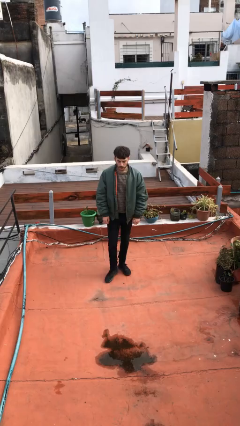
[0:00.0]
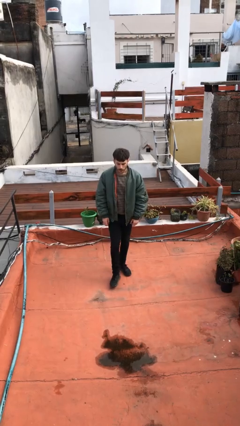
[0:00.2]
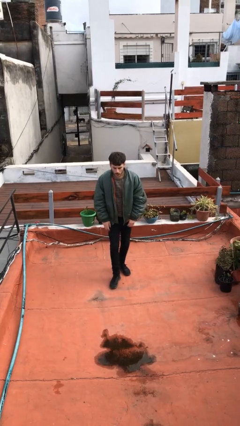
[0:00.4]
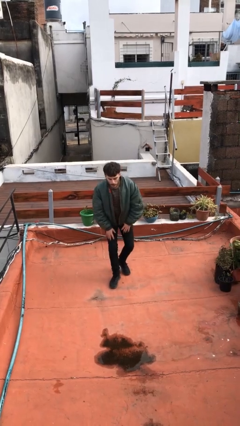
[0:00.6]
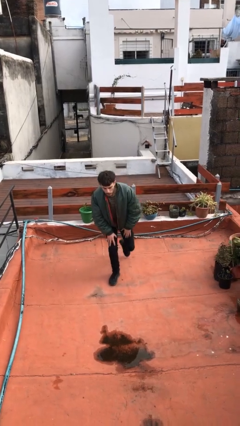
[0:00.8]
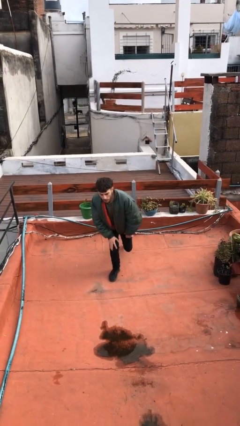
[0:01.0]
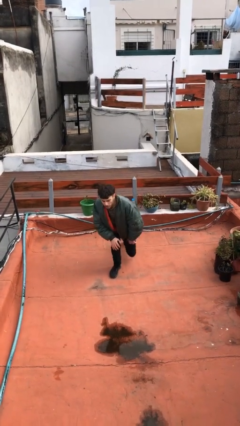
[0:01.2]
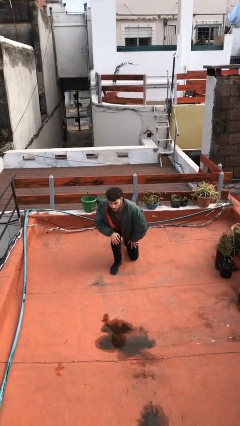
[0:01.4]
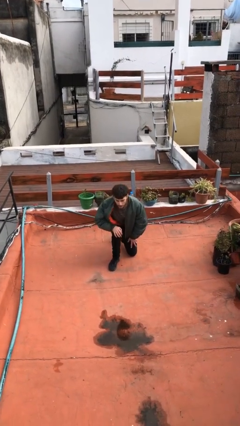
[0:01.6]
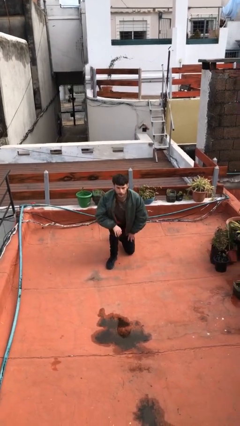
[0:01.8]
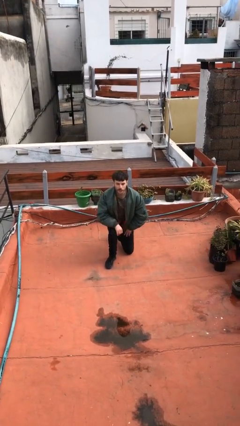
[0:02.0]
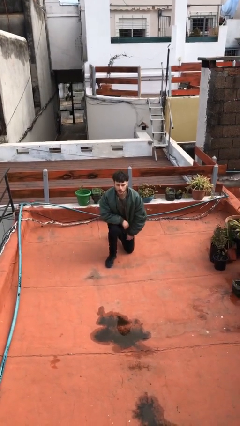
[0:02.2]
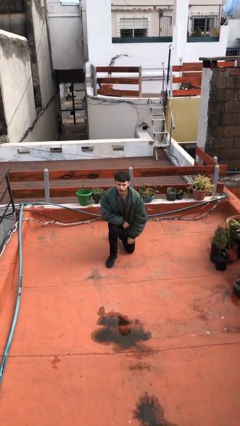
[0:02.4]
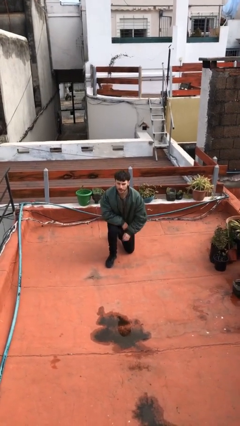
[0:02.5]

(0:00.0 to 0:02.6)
person kneels

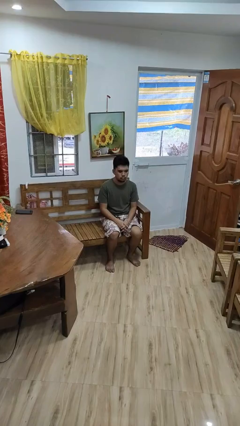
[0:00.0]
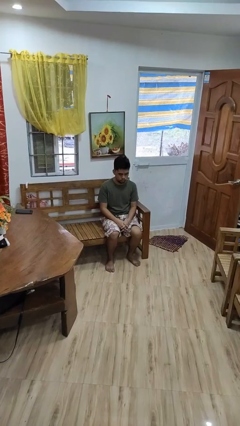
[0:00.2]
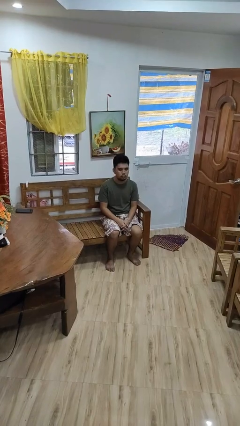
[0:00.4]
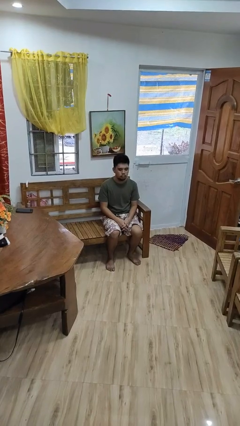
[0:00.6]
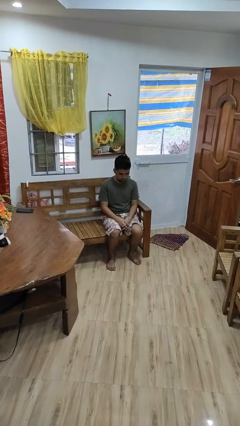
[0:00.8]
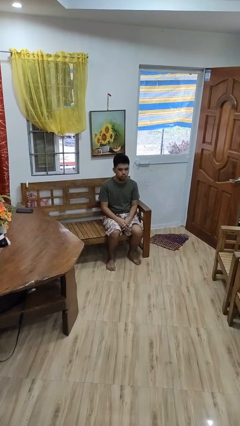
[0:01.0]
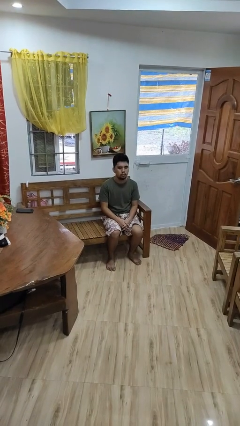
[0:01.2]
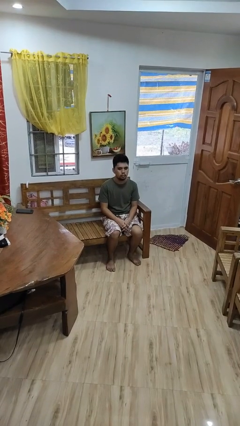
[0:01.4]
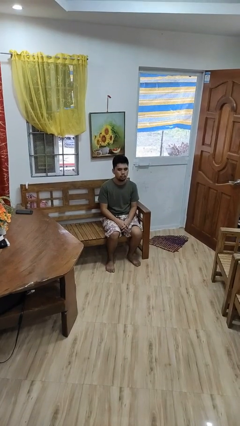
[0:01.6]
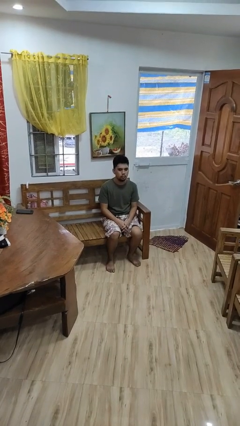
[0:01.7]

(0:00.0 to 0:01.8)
person nods head

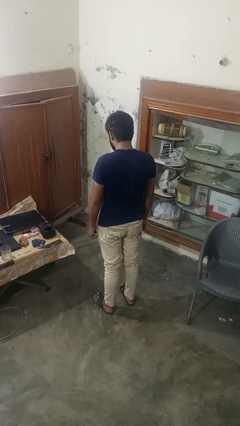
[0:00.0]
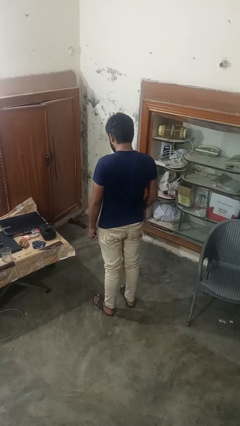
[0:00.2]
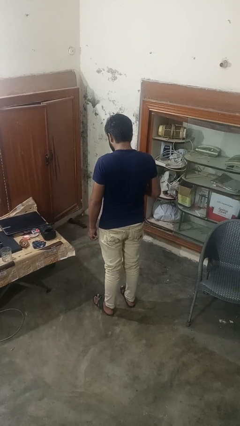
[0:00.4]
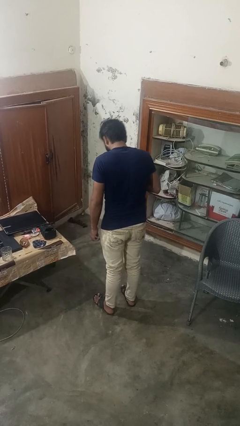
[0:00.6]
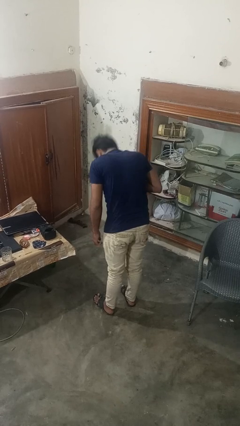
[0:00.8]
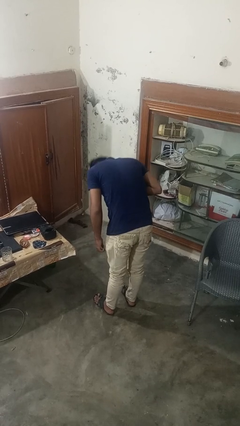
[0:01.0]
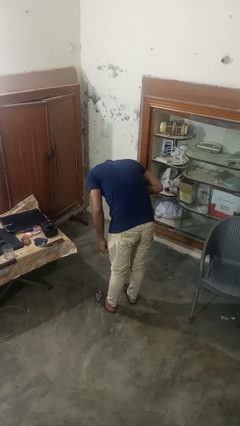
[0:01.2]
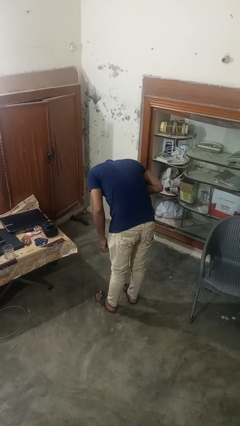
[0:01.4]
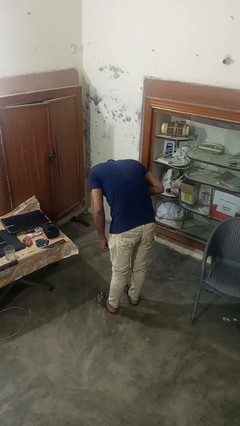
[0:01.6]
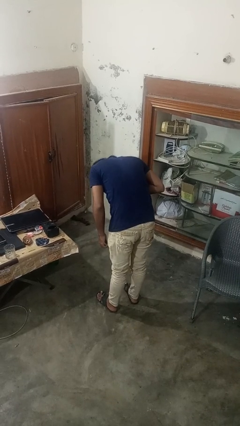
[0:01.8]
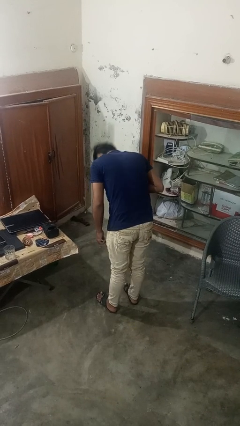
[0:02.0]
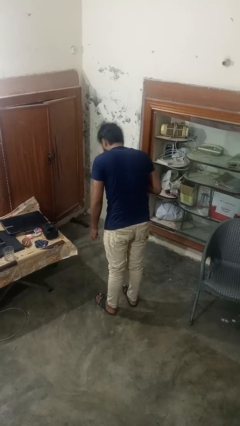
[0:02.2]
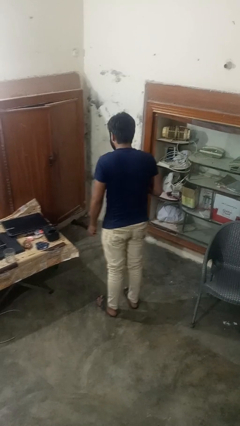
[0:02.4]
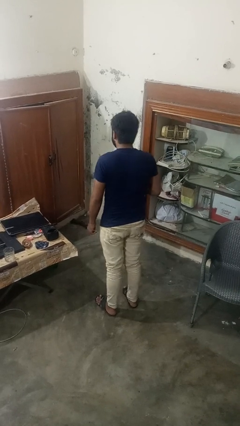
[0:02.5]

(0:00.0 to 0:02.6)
person bows

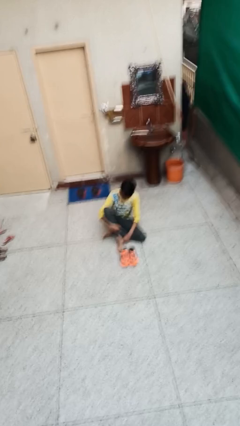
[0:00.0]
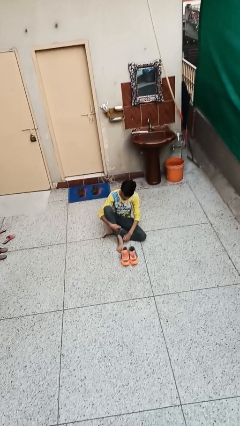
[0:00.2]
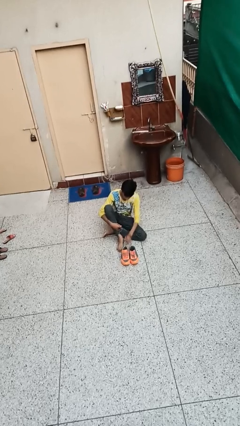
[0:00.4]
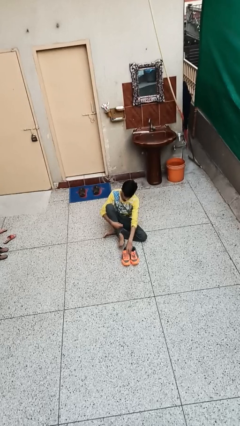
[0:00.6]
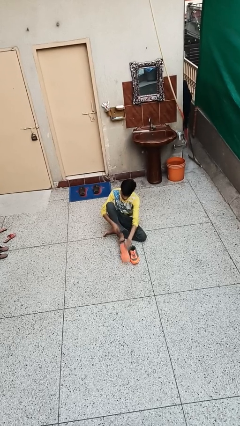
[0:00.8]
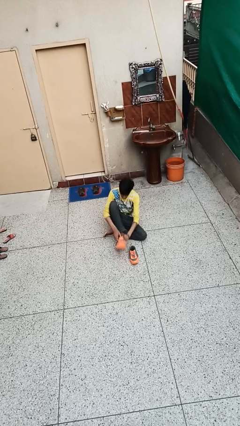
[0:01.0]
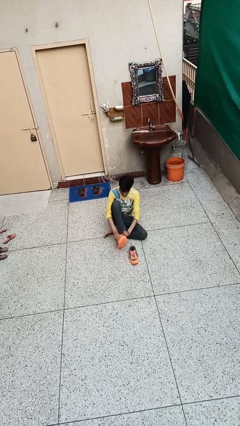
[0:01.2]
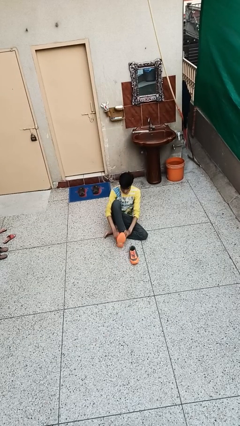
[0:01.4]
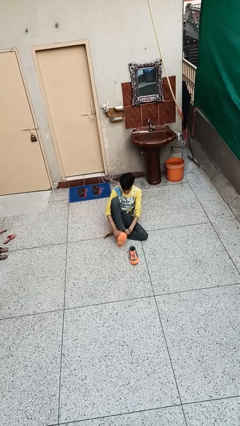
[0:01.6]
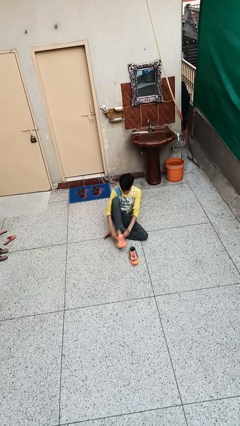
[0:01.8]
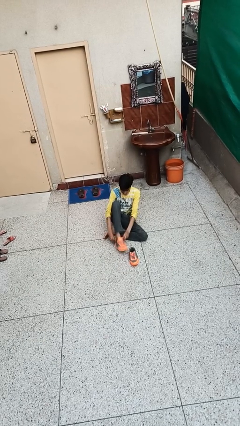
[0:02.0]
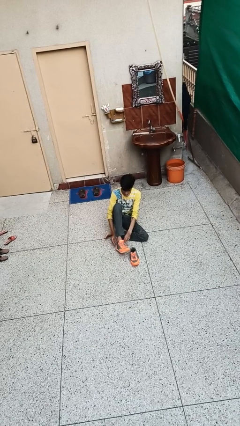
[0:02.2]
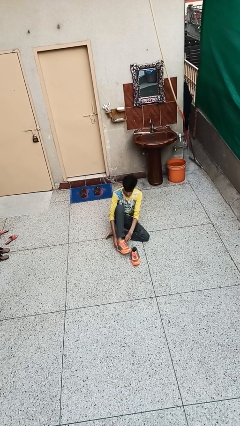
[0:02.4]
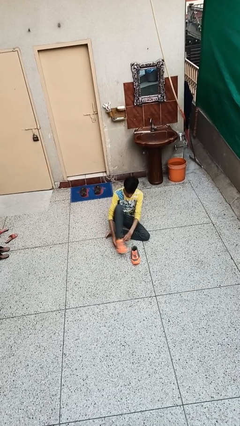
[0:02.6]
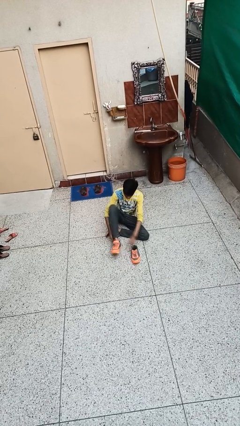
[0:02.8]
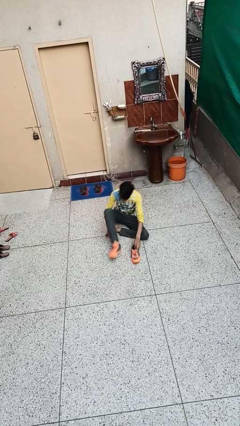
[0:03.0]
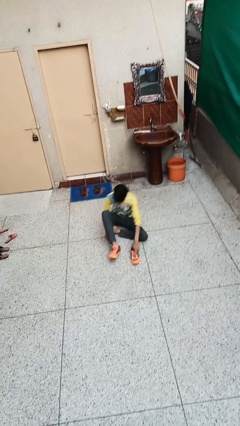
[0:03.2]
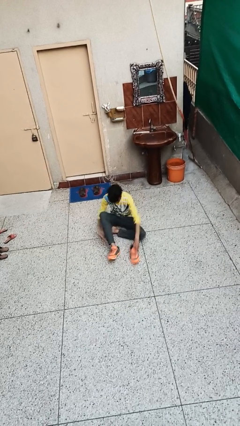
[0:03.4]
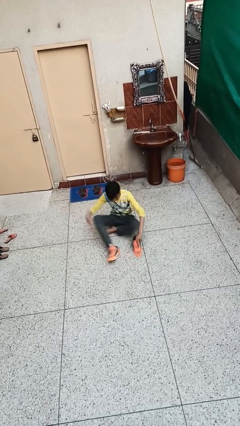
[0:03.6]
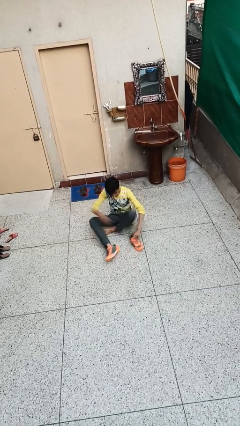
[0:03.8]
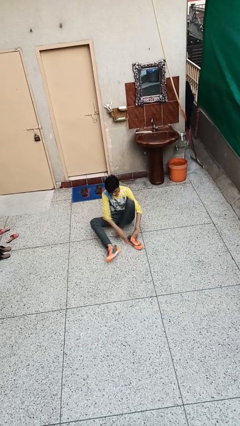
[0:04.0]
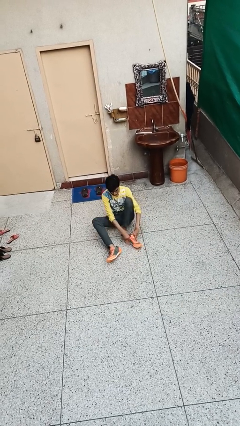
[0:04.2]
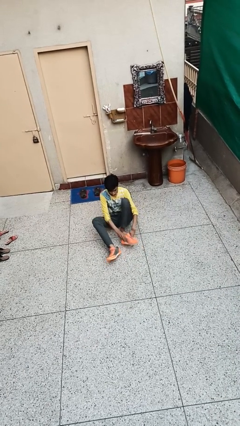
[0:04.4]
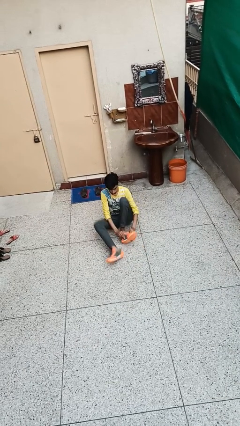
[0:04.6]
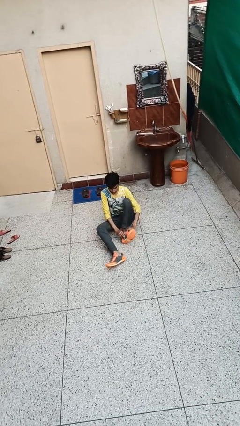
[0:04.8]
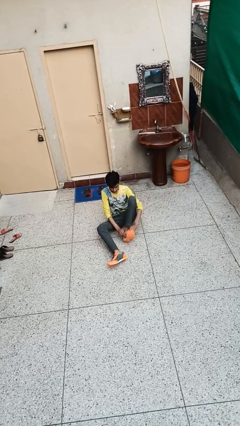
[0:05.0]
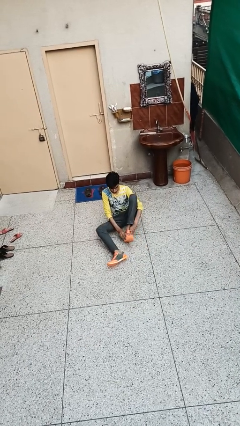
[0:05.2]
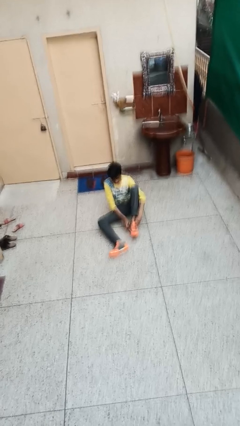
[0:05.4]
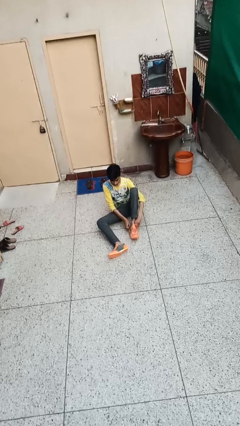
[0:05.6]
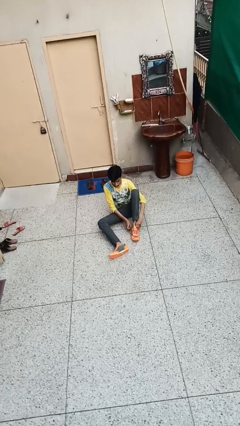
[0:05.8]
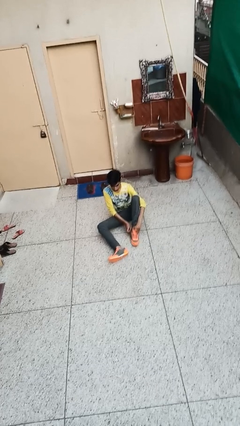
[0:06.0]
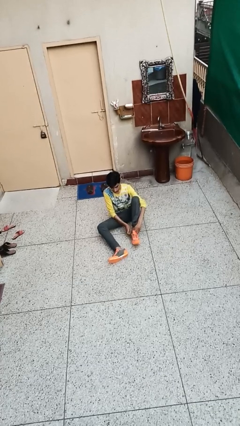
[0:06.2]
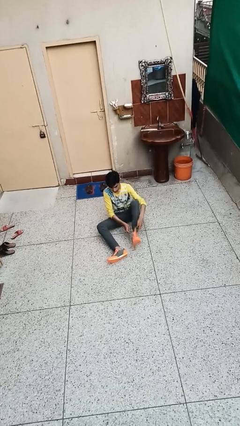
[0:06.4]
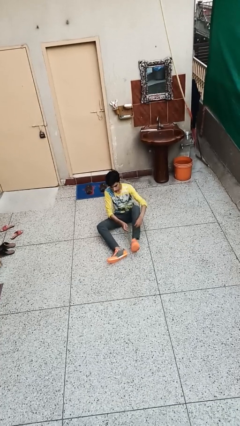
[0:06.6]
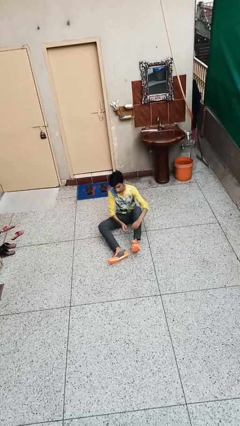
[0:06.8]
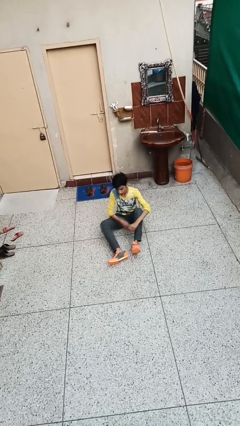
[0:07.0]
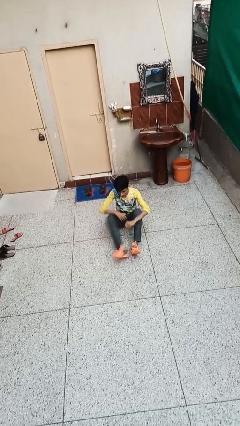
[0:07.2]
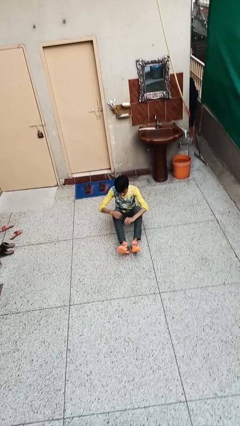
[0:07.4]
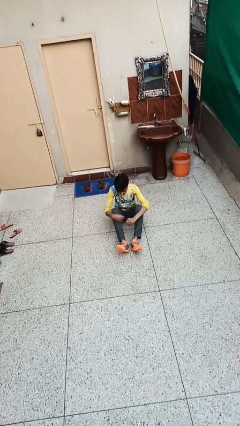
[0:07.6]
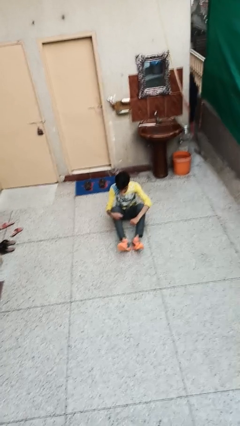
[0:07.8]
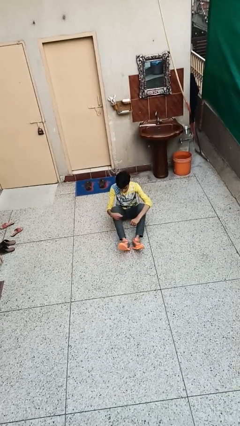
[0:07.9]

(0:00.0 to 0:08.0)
person puts on shoes

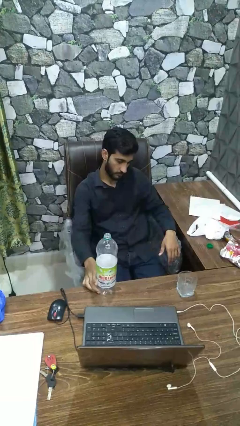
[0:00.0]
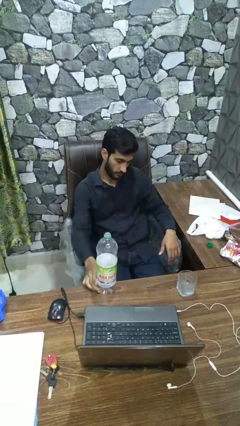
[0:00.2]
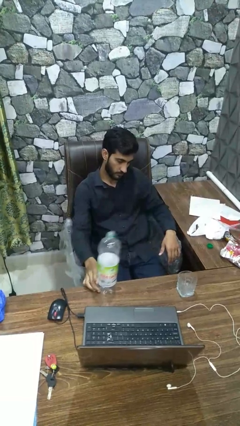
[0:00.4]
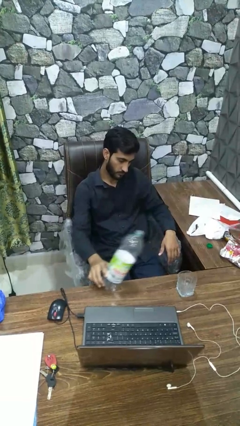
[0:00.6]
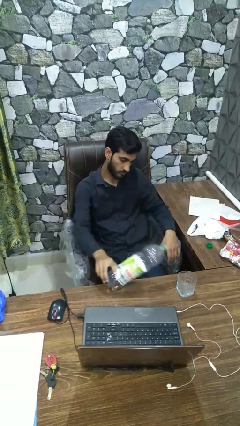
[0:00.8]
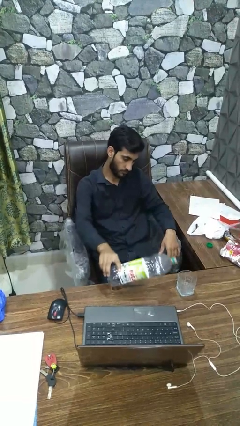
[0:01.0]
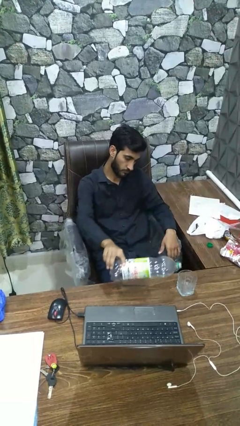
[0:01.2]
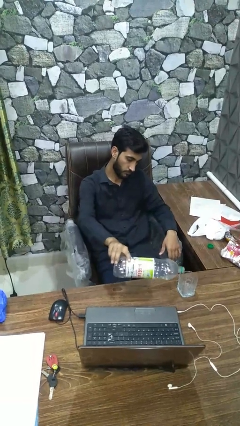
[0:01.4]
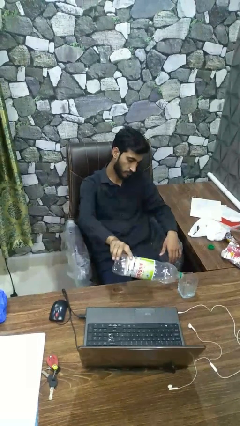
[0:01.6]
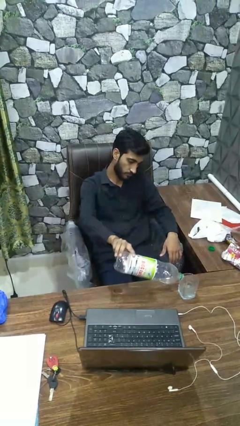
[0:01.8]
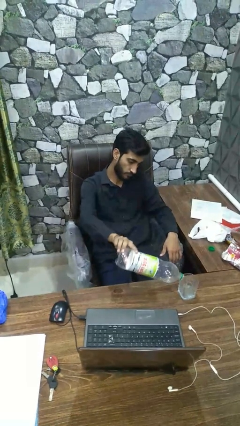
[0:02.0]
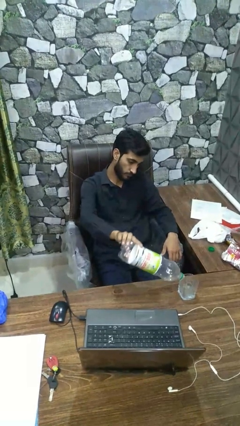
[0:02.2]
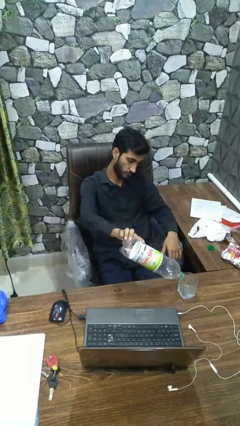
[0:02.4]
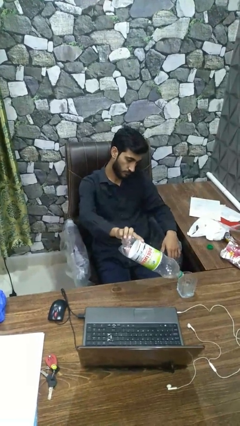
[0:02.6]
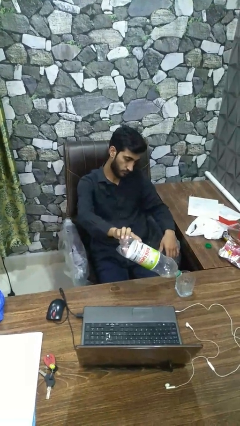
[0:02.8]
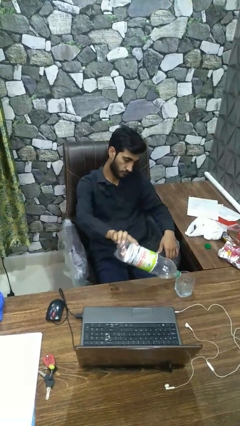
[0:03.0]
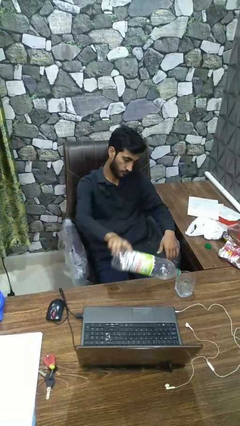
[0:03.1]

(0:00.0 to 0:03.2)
person pours liquid into cup
